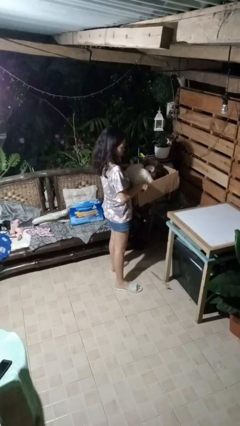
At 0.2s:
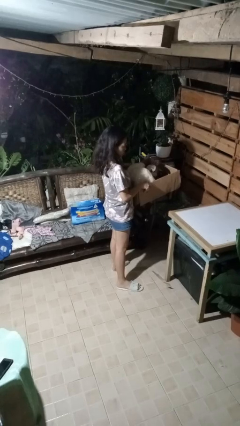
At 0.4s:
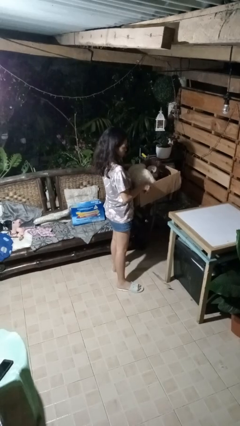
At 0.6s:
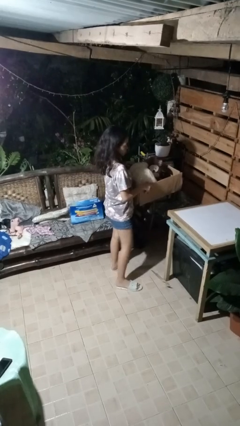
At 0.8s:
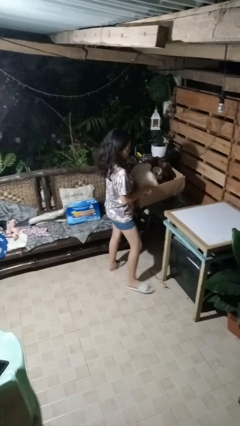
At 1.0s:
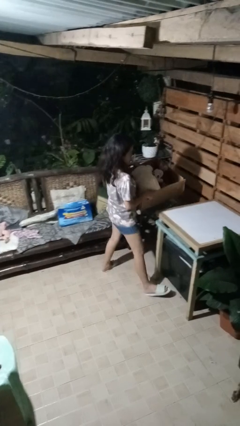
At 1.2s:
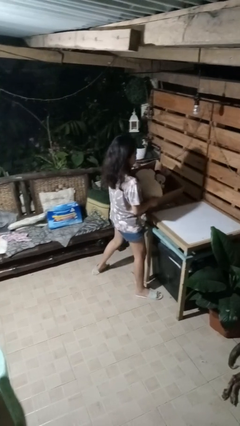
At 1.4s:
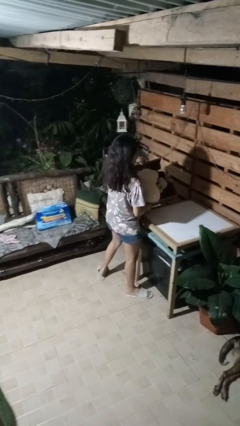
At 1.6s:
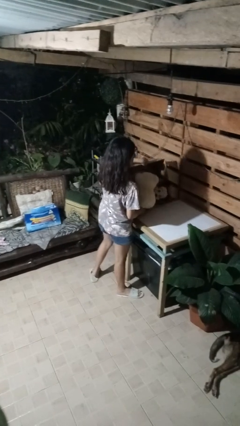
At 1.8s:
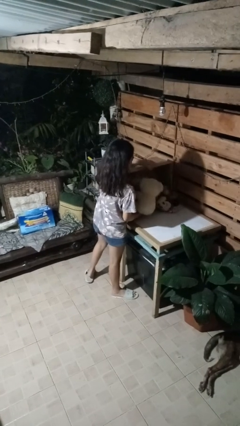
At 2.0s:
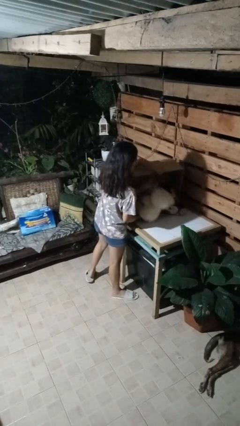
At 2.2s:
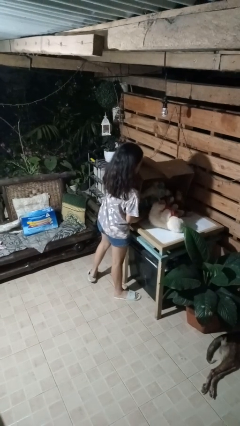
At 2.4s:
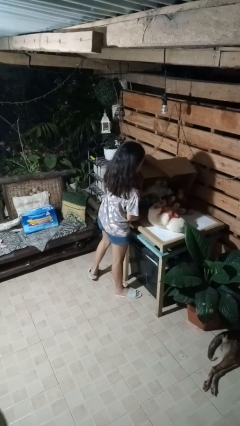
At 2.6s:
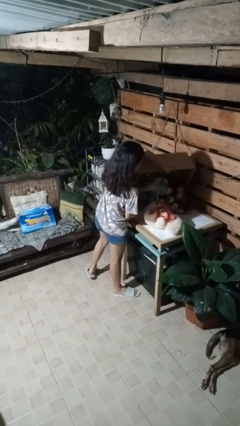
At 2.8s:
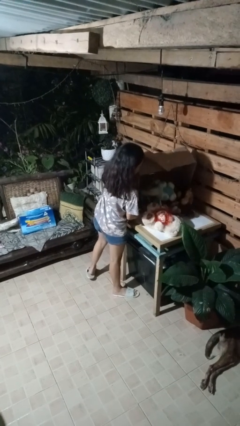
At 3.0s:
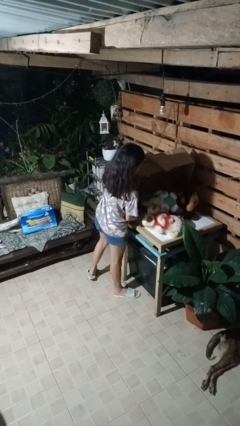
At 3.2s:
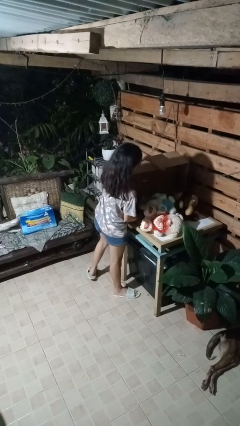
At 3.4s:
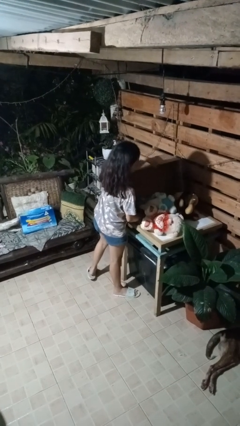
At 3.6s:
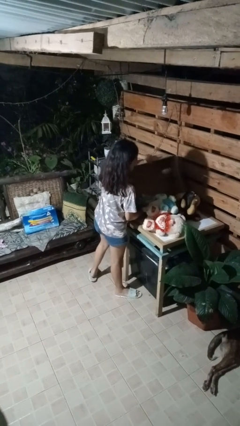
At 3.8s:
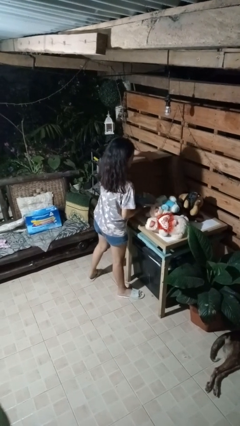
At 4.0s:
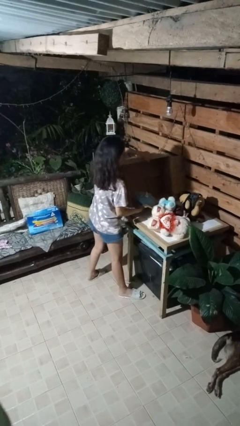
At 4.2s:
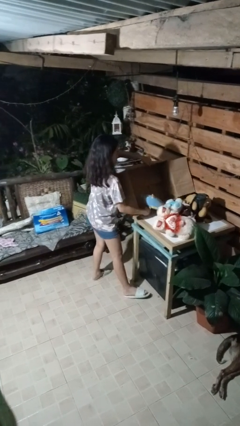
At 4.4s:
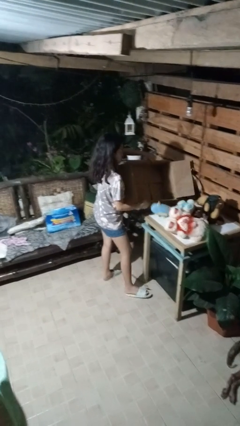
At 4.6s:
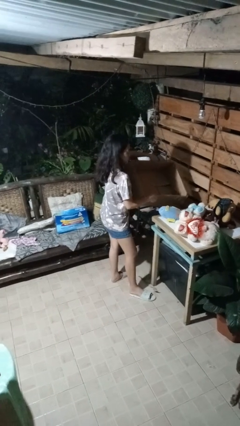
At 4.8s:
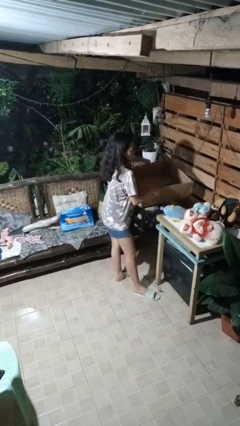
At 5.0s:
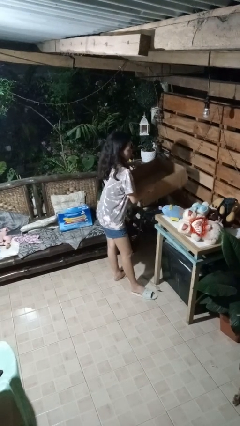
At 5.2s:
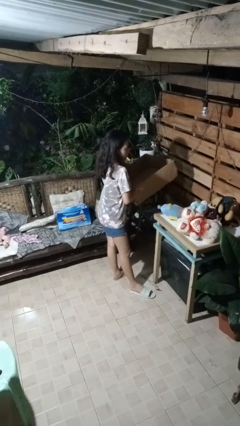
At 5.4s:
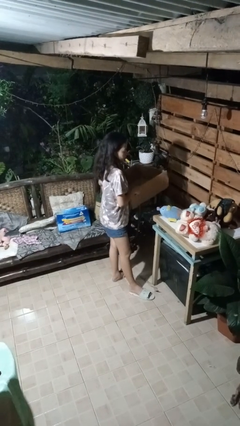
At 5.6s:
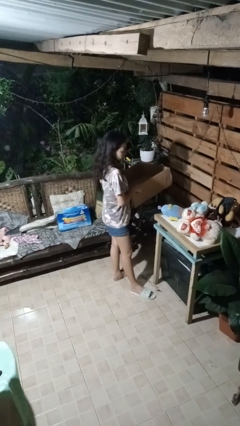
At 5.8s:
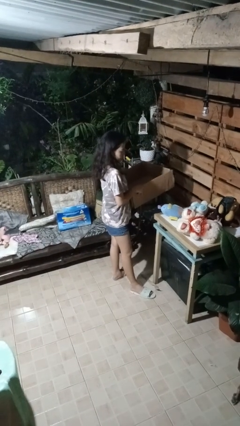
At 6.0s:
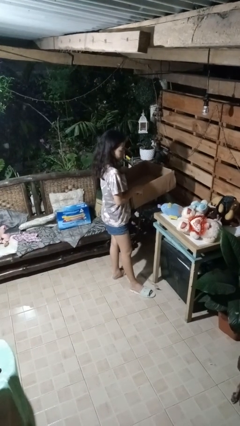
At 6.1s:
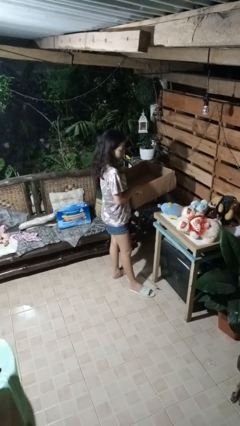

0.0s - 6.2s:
person unloads box onto table

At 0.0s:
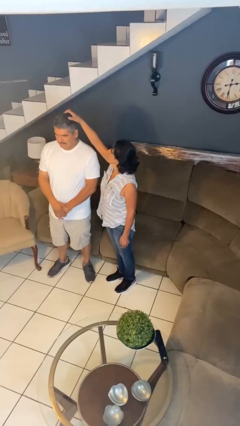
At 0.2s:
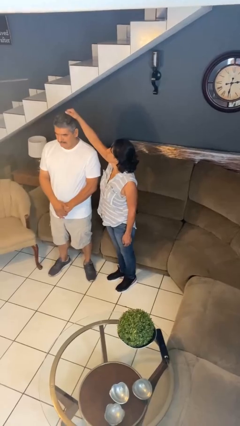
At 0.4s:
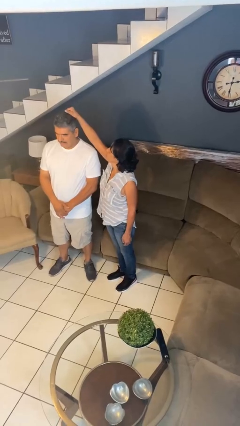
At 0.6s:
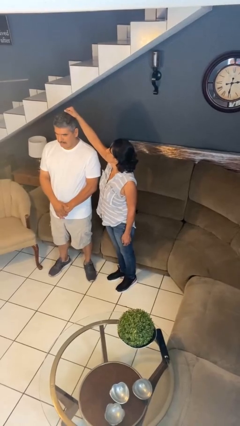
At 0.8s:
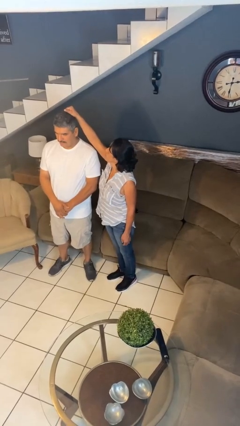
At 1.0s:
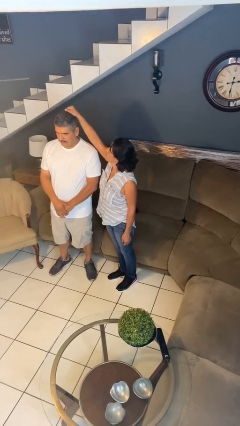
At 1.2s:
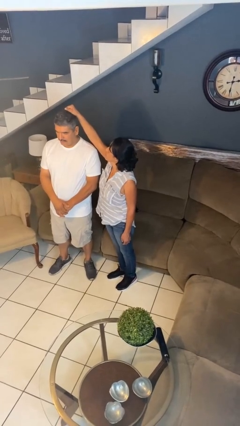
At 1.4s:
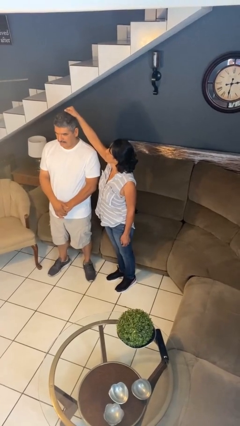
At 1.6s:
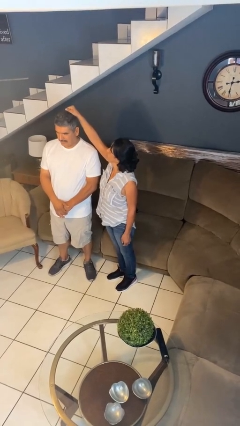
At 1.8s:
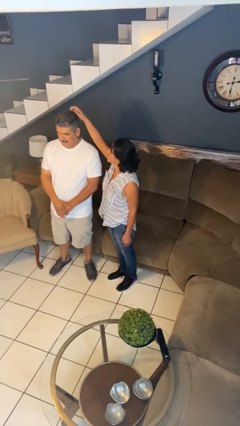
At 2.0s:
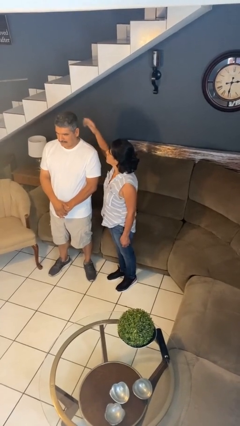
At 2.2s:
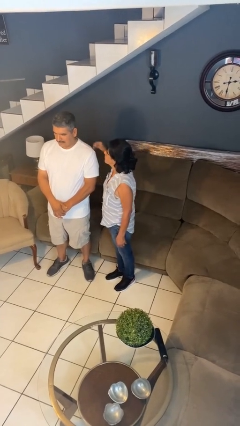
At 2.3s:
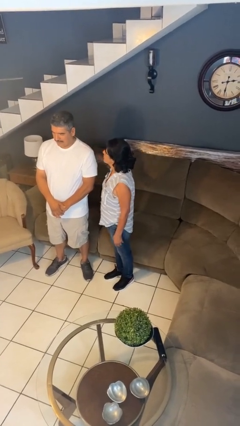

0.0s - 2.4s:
person grabs person by hair

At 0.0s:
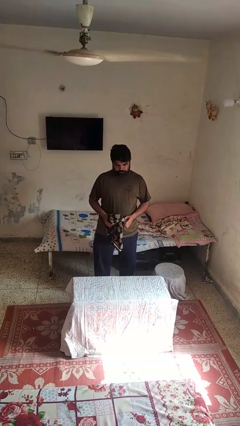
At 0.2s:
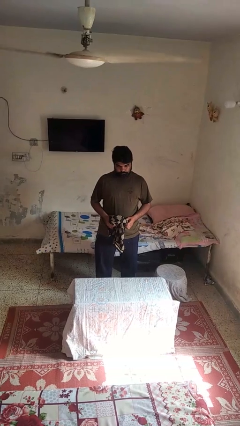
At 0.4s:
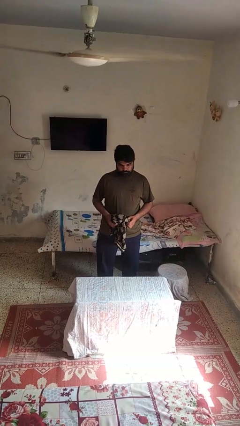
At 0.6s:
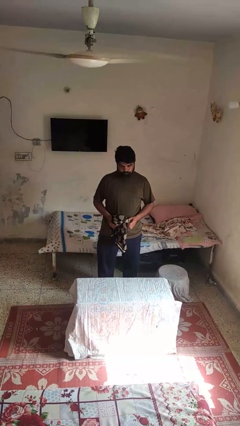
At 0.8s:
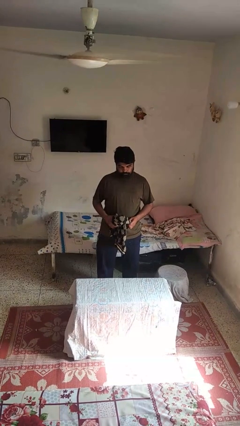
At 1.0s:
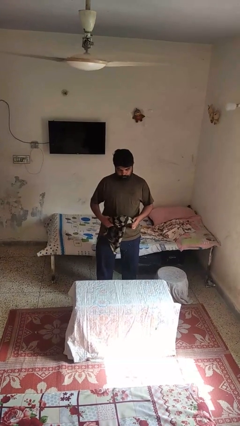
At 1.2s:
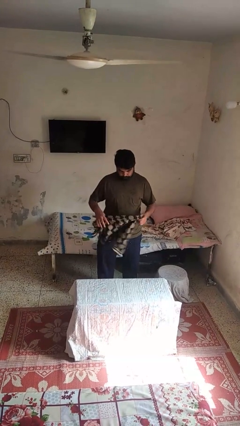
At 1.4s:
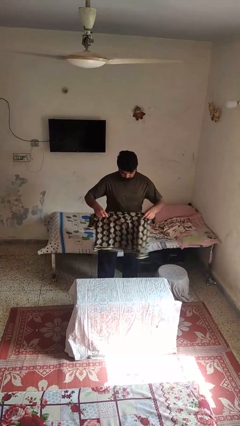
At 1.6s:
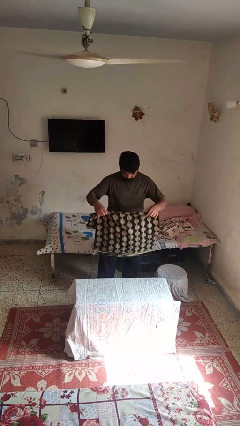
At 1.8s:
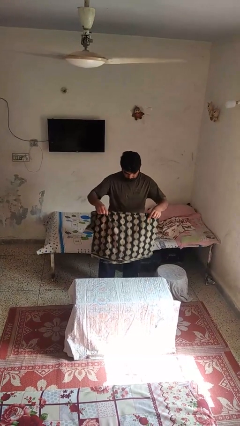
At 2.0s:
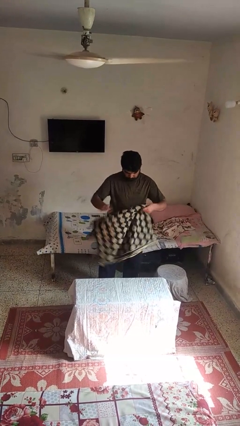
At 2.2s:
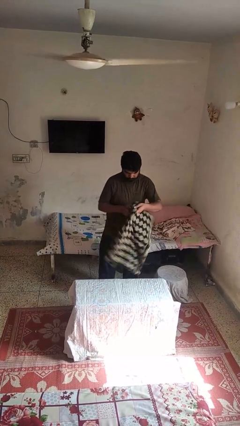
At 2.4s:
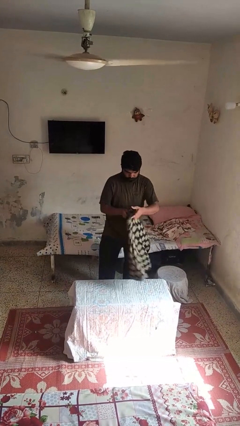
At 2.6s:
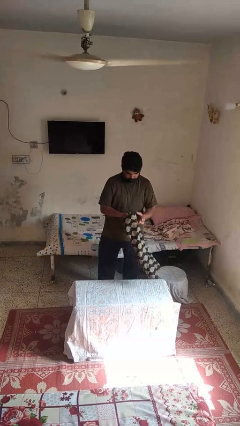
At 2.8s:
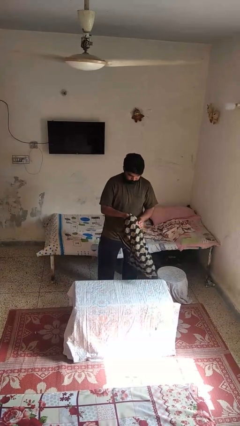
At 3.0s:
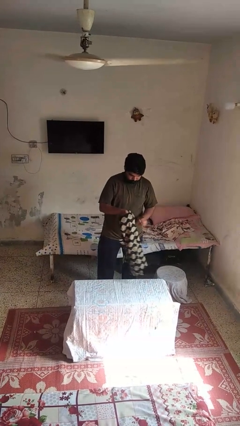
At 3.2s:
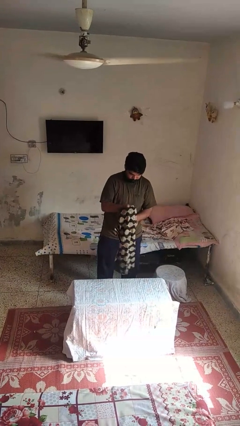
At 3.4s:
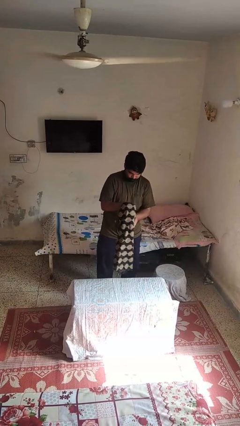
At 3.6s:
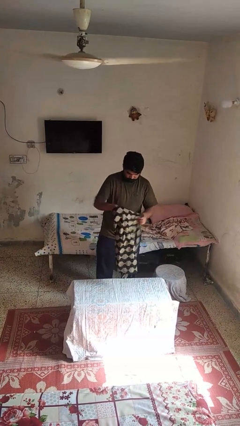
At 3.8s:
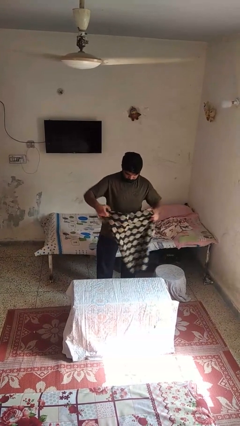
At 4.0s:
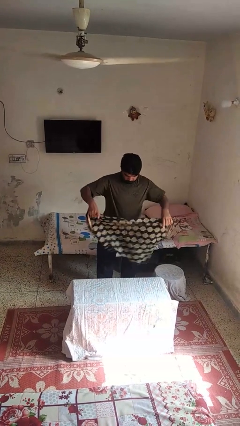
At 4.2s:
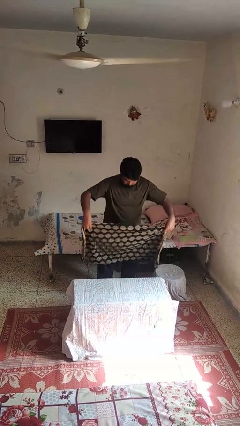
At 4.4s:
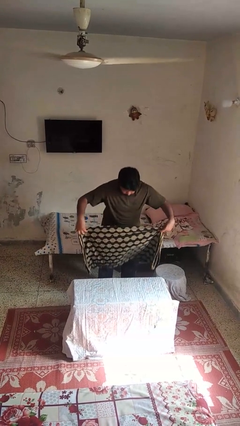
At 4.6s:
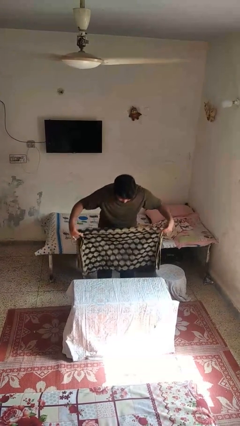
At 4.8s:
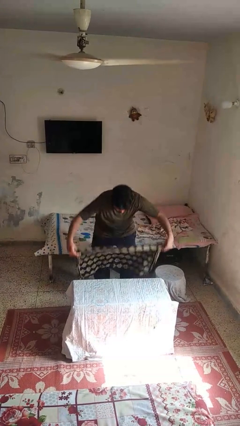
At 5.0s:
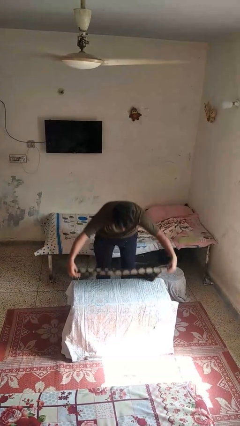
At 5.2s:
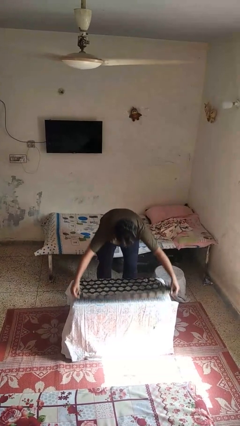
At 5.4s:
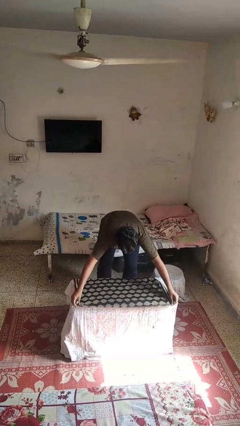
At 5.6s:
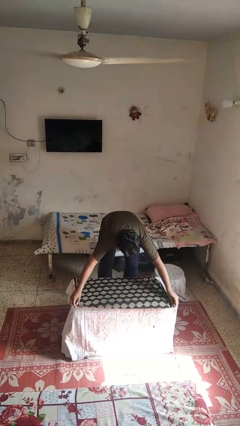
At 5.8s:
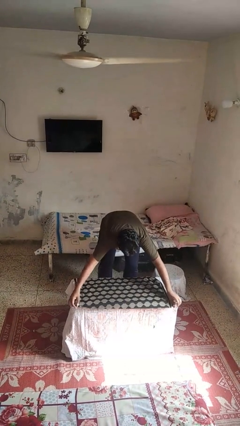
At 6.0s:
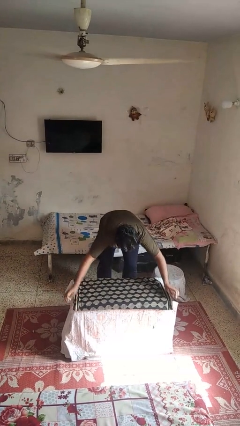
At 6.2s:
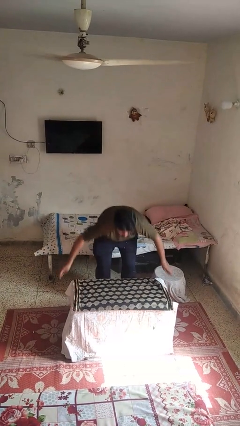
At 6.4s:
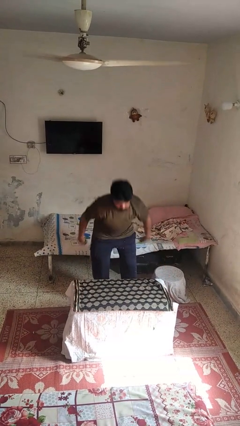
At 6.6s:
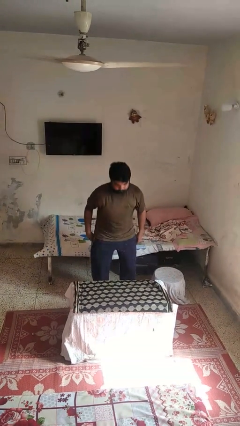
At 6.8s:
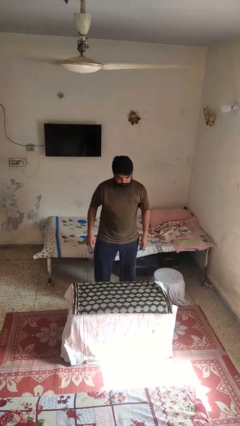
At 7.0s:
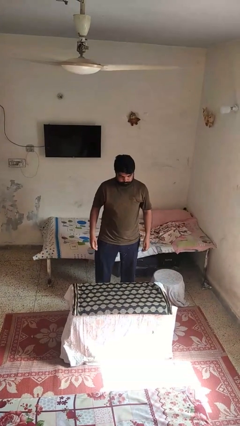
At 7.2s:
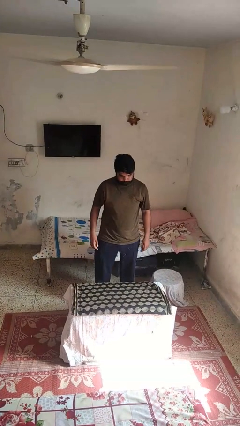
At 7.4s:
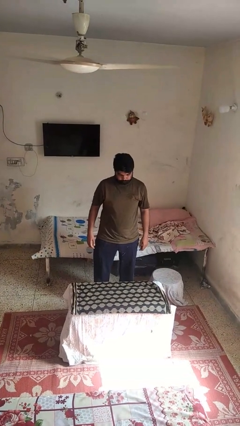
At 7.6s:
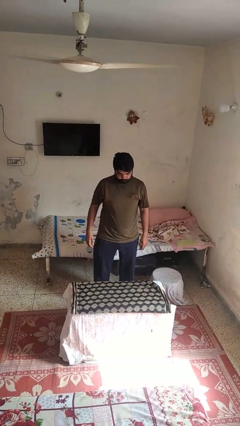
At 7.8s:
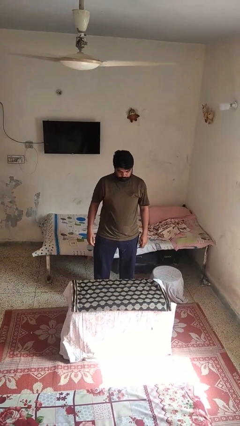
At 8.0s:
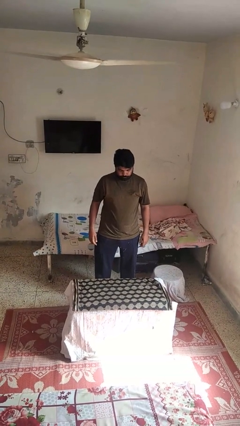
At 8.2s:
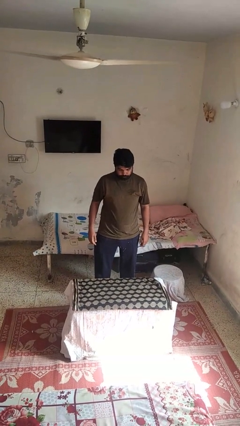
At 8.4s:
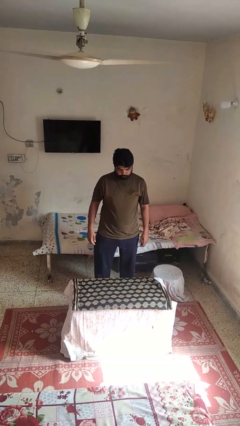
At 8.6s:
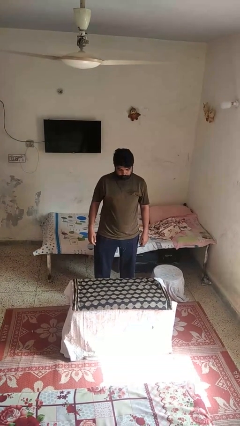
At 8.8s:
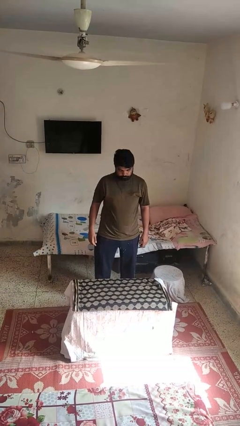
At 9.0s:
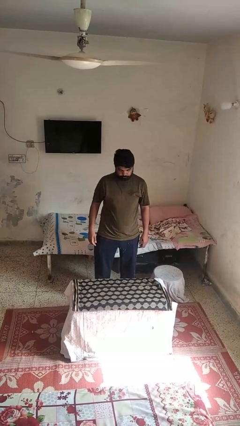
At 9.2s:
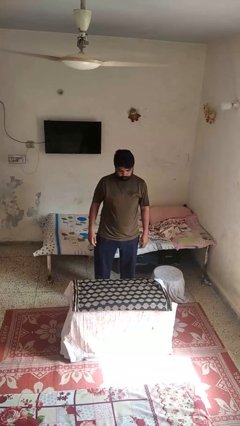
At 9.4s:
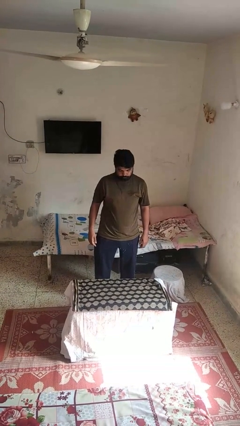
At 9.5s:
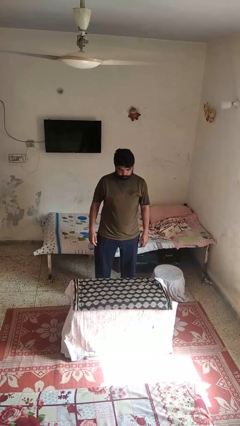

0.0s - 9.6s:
person spreads tablecloth
